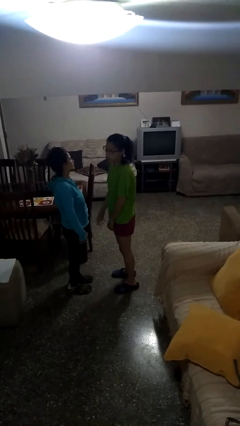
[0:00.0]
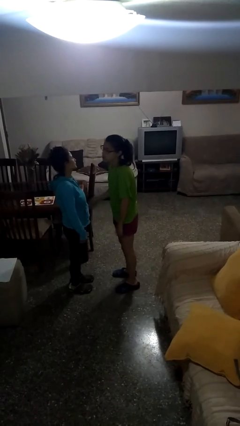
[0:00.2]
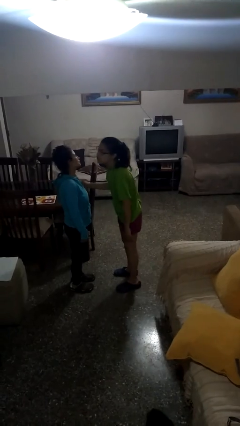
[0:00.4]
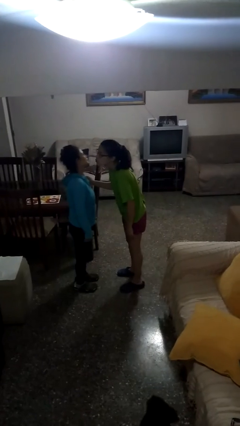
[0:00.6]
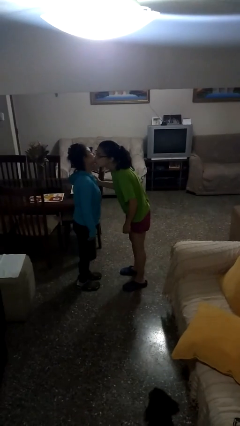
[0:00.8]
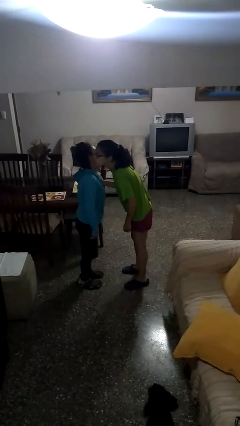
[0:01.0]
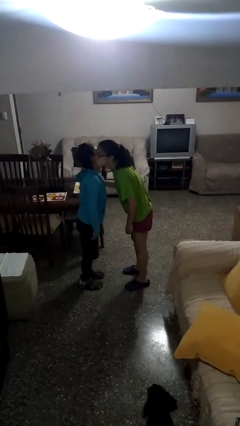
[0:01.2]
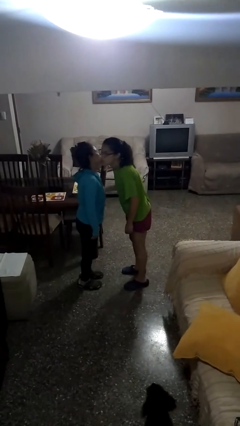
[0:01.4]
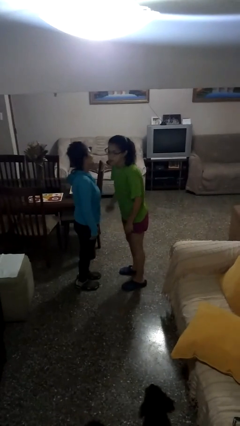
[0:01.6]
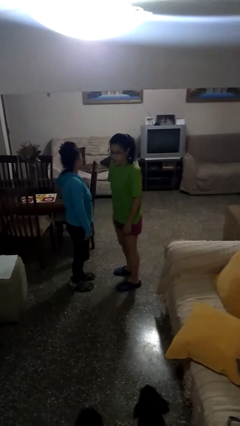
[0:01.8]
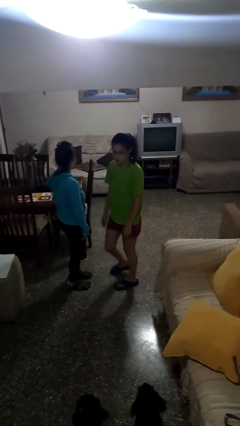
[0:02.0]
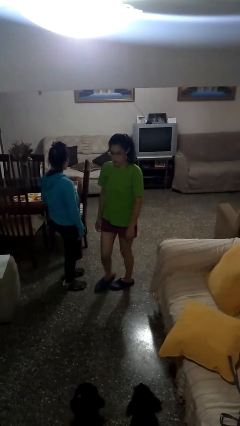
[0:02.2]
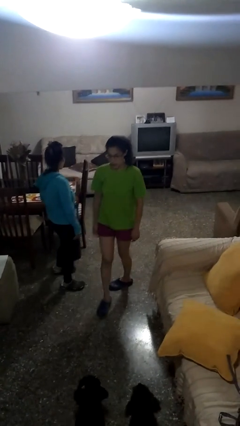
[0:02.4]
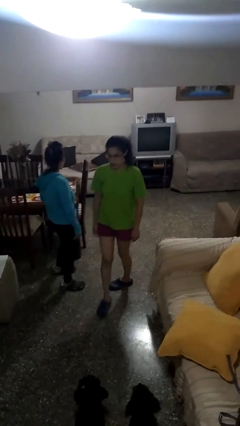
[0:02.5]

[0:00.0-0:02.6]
person kisses cheek of person

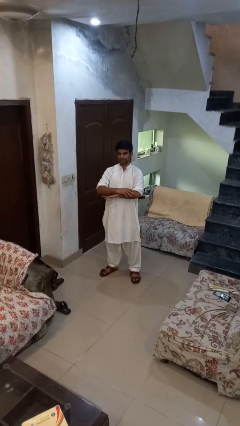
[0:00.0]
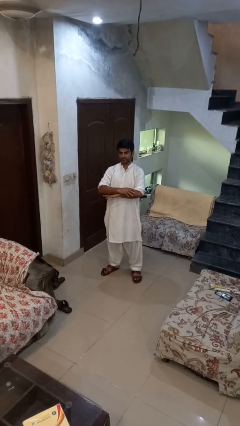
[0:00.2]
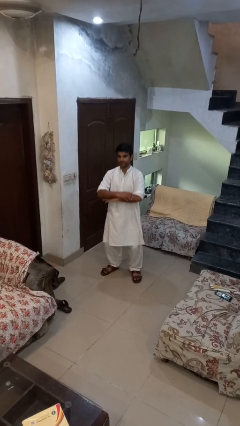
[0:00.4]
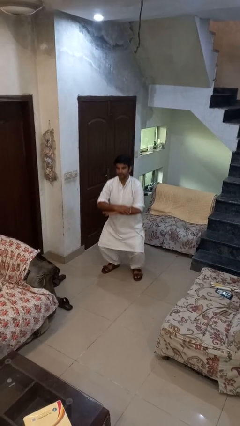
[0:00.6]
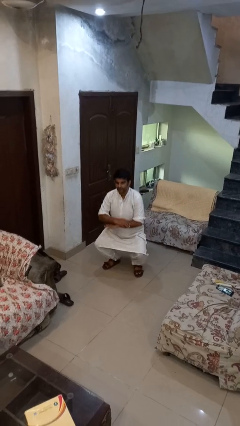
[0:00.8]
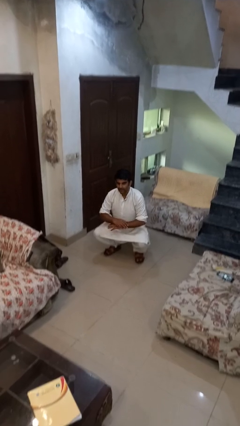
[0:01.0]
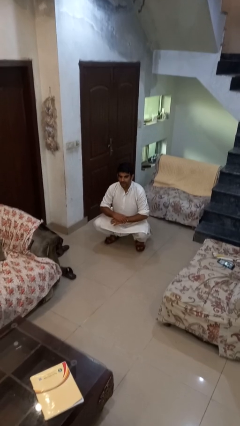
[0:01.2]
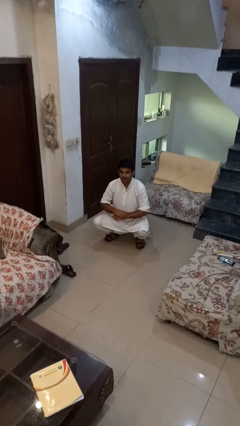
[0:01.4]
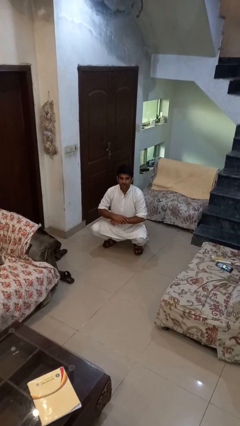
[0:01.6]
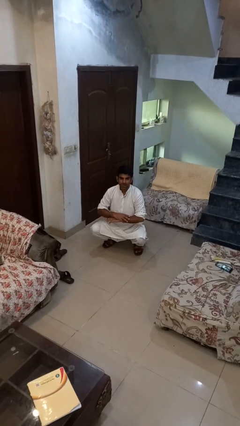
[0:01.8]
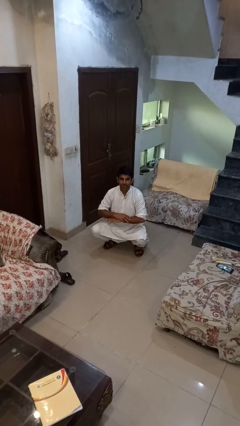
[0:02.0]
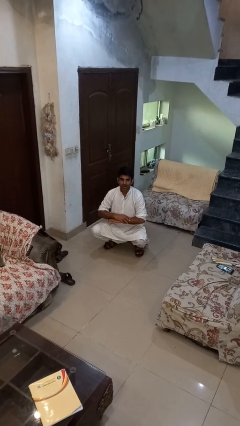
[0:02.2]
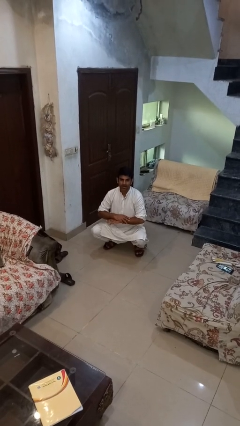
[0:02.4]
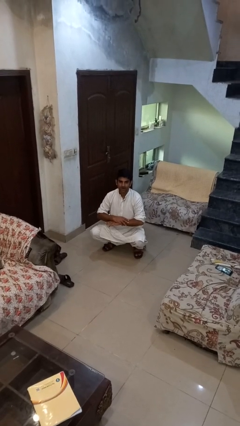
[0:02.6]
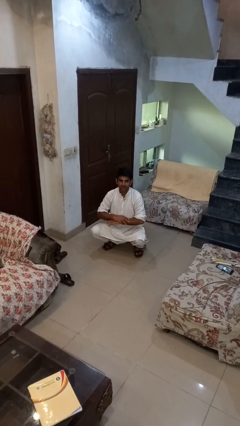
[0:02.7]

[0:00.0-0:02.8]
person squats

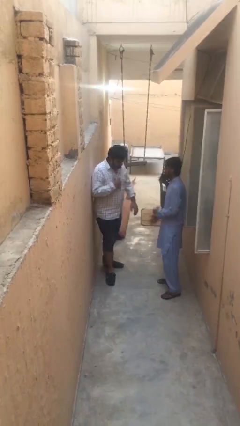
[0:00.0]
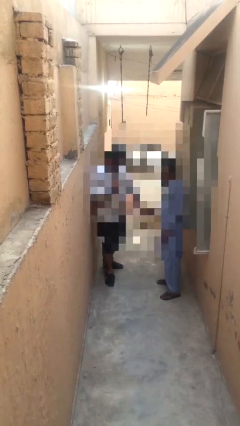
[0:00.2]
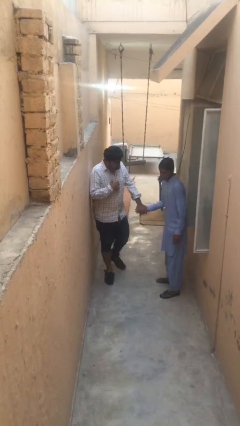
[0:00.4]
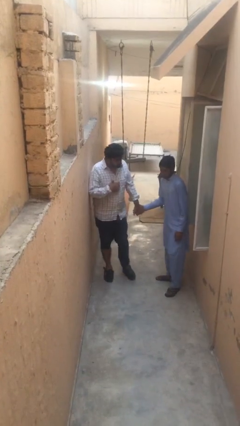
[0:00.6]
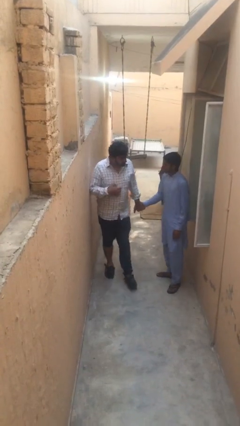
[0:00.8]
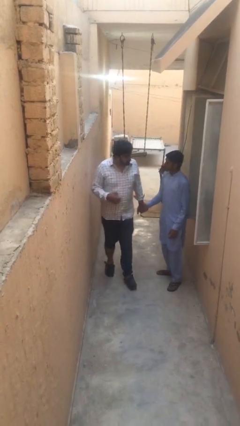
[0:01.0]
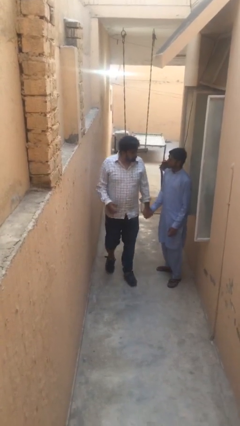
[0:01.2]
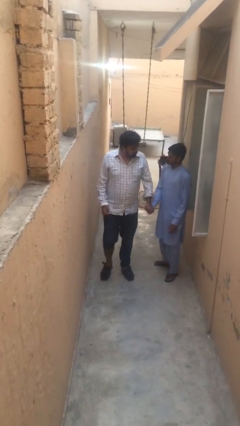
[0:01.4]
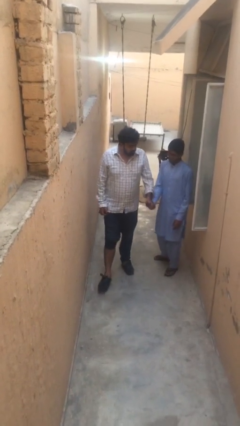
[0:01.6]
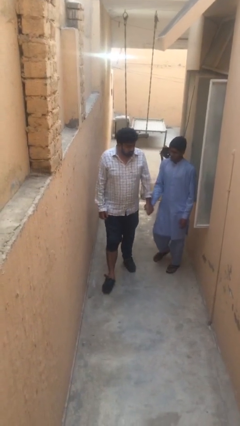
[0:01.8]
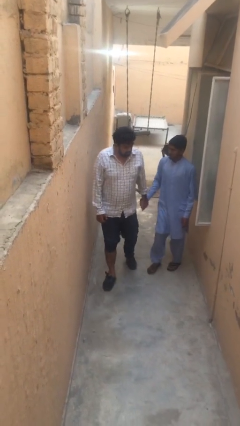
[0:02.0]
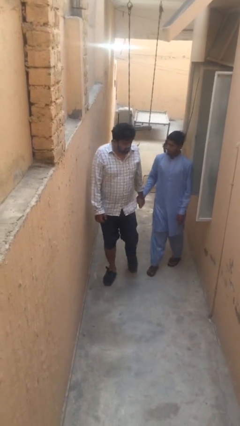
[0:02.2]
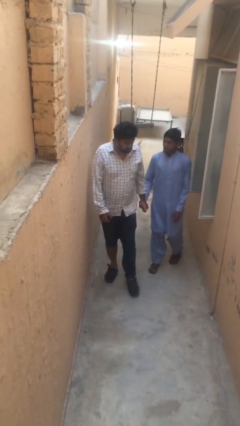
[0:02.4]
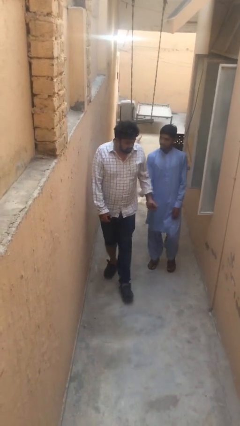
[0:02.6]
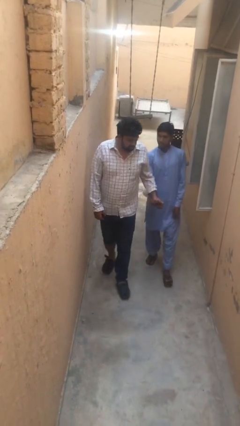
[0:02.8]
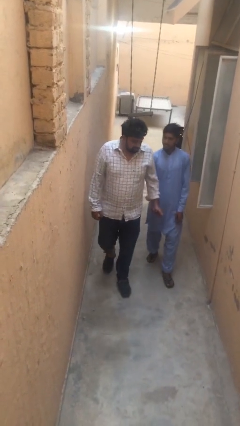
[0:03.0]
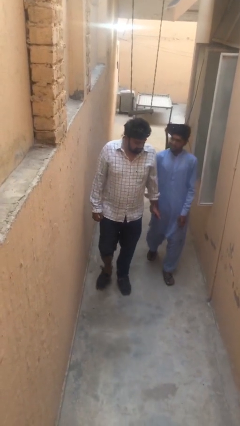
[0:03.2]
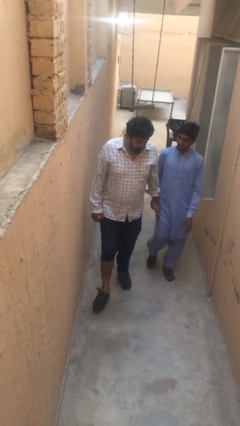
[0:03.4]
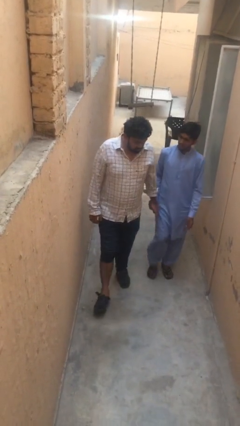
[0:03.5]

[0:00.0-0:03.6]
person holds hand

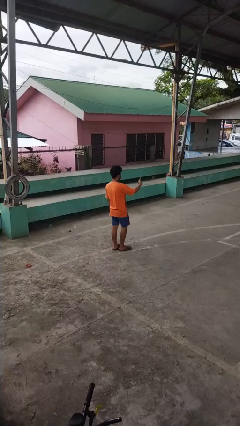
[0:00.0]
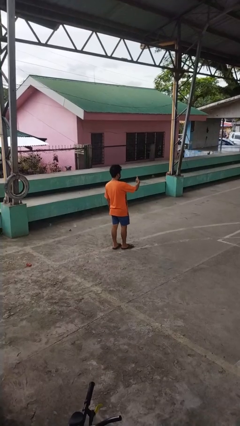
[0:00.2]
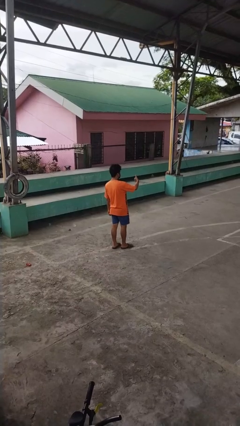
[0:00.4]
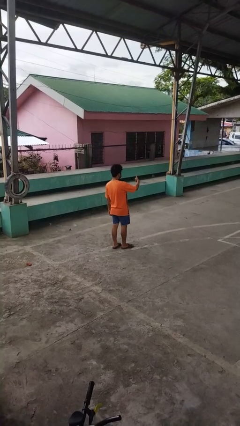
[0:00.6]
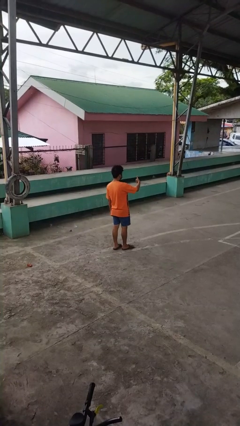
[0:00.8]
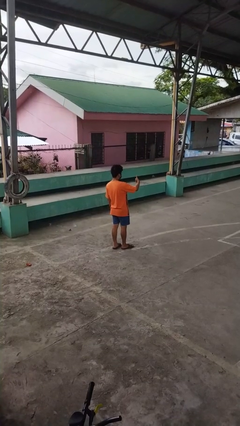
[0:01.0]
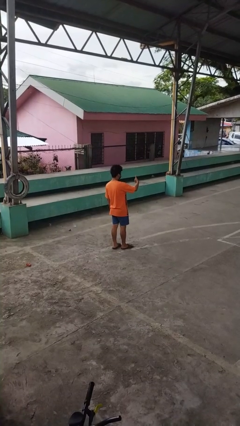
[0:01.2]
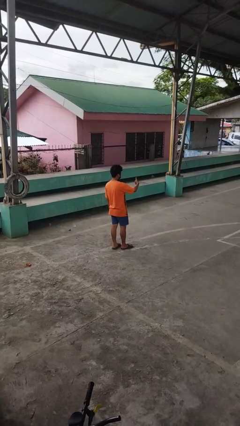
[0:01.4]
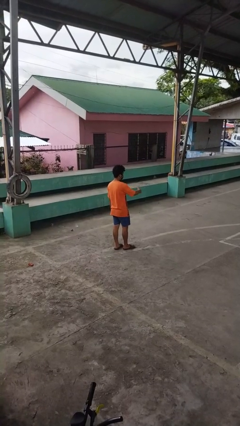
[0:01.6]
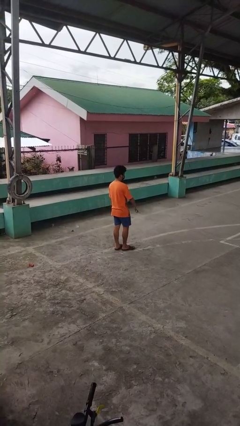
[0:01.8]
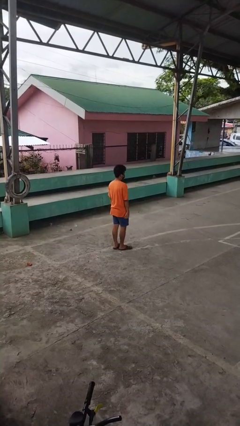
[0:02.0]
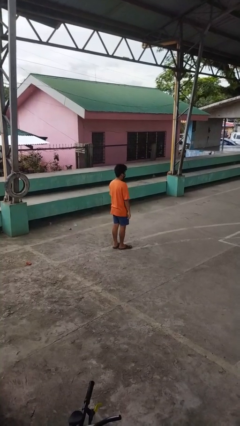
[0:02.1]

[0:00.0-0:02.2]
person gestures thumbs up

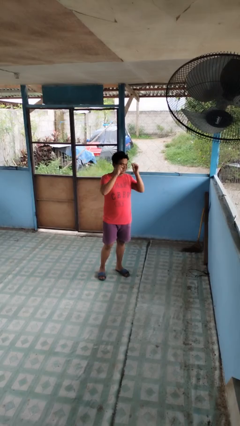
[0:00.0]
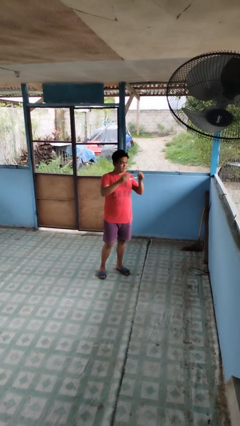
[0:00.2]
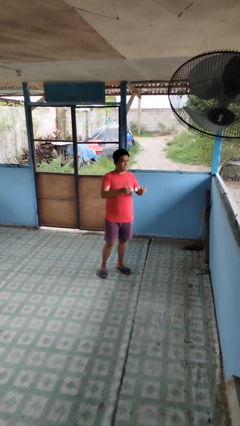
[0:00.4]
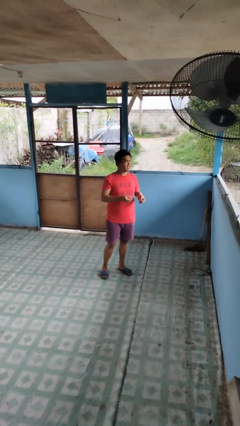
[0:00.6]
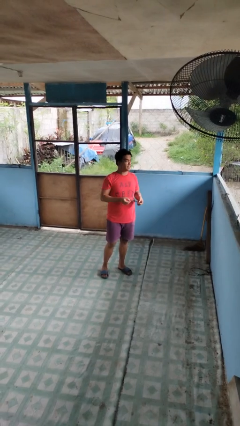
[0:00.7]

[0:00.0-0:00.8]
person takes off glasses

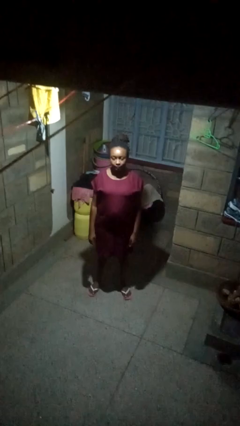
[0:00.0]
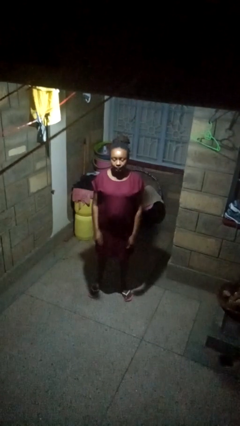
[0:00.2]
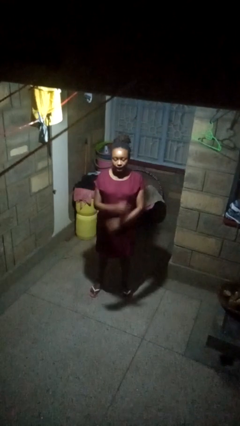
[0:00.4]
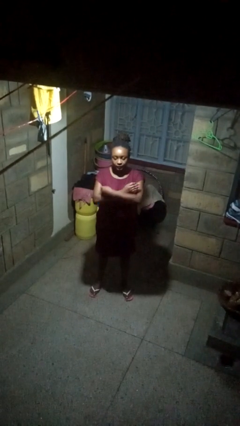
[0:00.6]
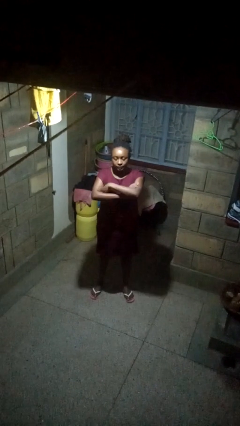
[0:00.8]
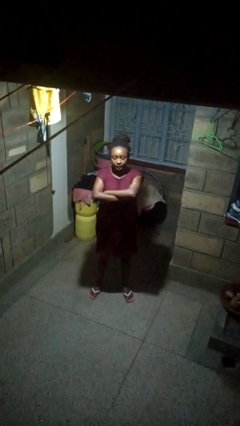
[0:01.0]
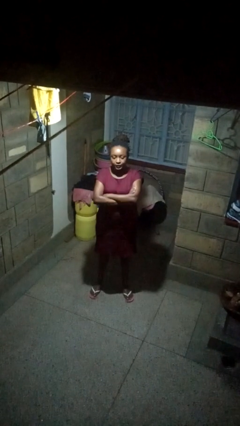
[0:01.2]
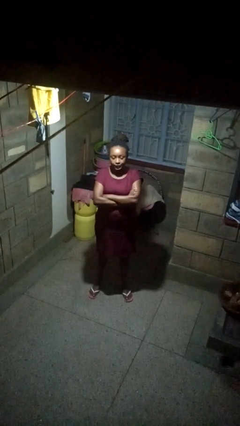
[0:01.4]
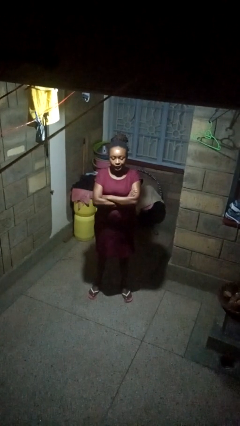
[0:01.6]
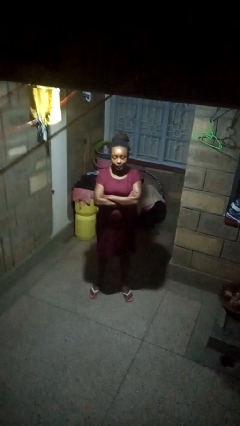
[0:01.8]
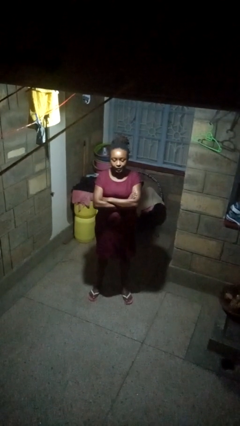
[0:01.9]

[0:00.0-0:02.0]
person crosses arms

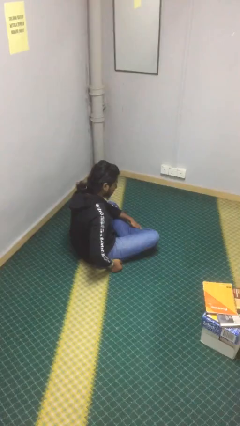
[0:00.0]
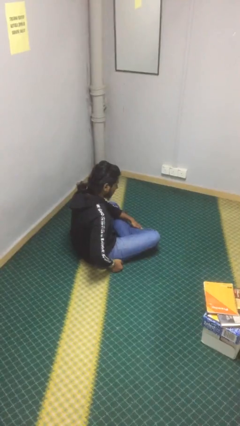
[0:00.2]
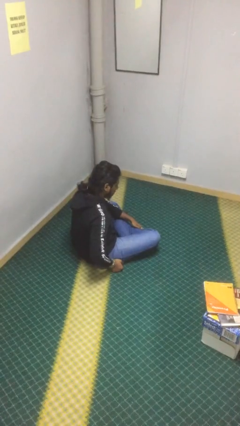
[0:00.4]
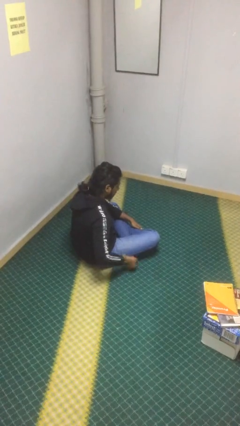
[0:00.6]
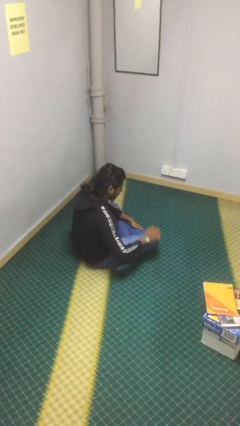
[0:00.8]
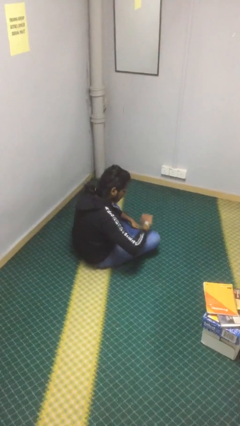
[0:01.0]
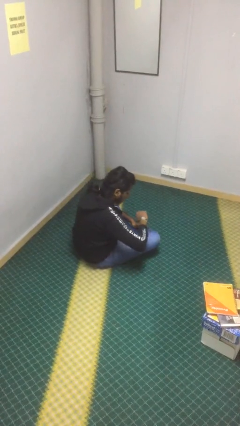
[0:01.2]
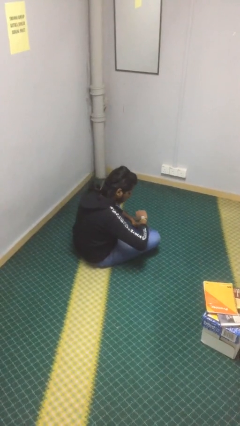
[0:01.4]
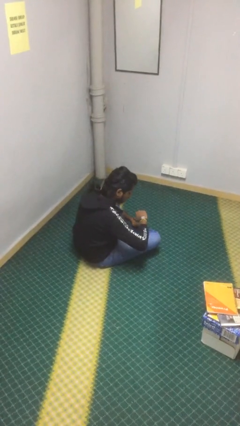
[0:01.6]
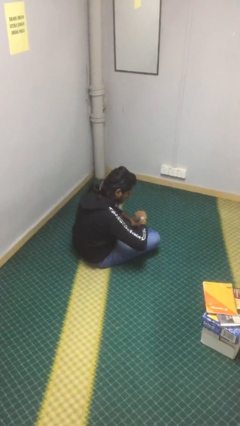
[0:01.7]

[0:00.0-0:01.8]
person looks at wristwatch

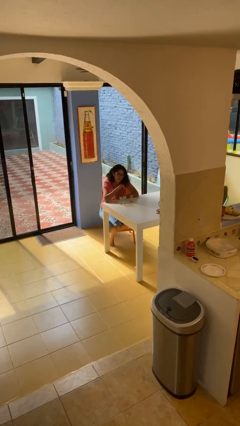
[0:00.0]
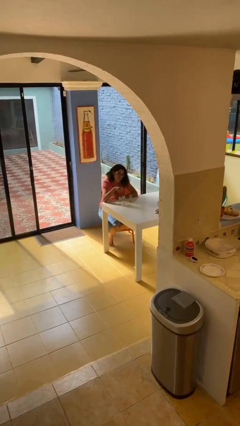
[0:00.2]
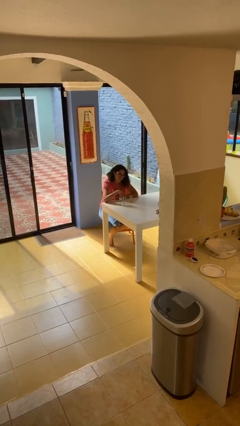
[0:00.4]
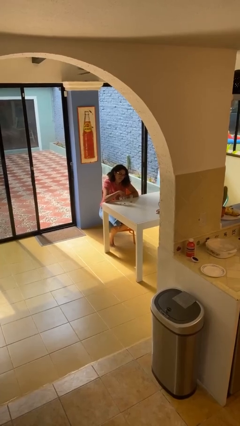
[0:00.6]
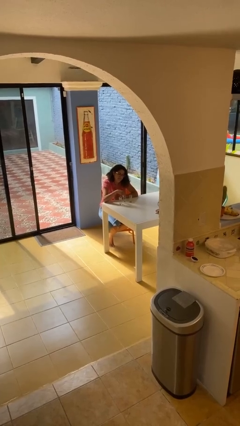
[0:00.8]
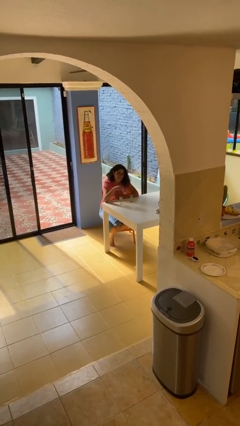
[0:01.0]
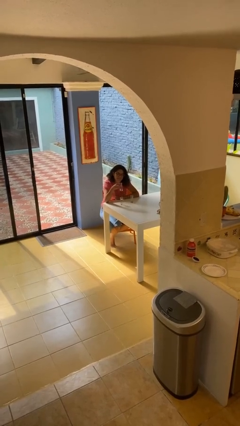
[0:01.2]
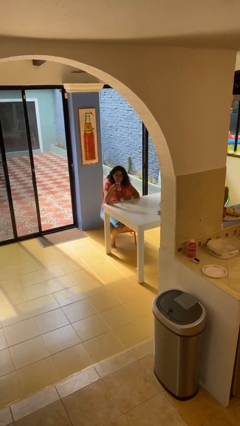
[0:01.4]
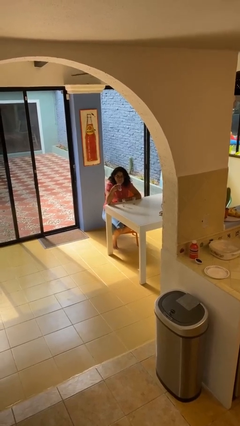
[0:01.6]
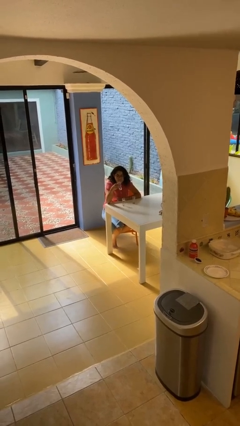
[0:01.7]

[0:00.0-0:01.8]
person picks up object from table
